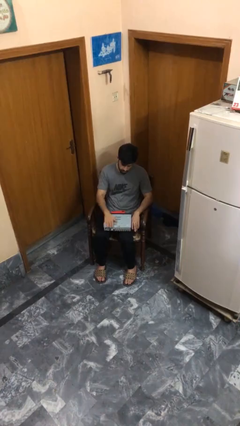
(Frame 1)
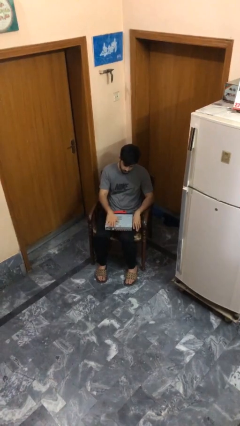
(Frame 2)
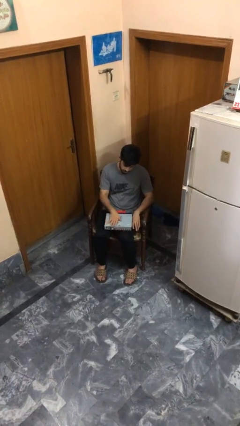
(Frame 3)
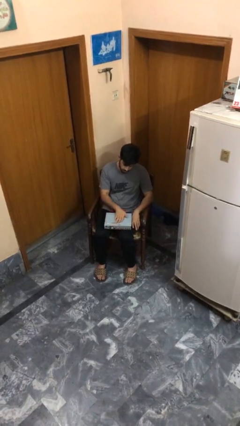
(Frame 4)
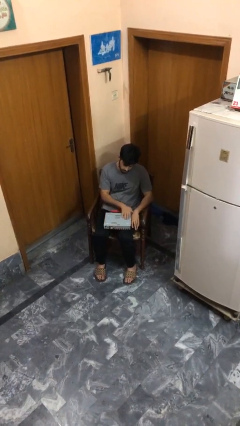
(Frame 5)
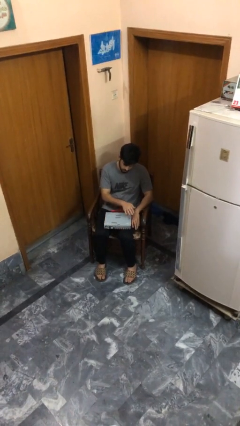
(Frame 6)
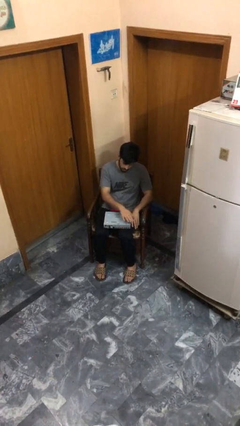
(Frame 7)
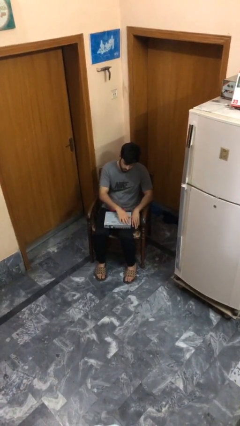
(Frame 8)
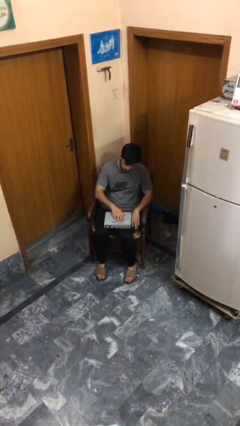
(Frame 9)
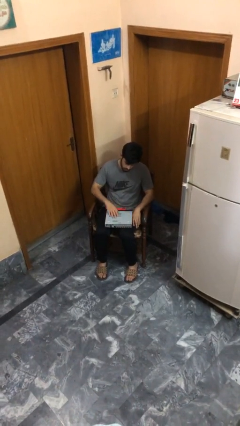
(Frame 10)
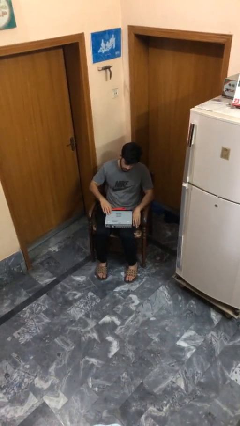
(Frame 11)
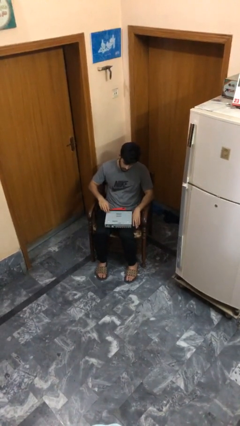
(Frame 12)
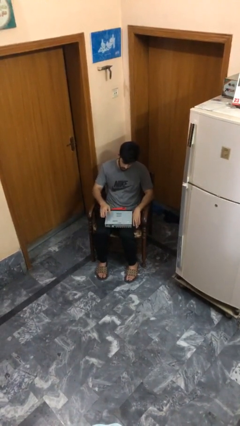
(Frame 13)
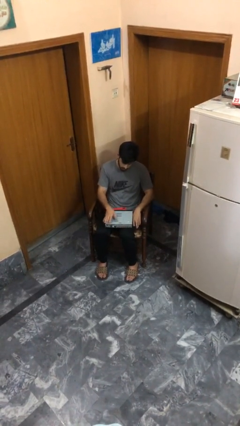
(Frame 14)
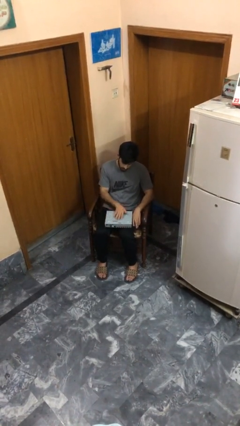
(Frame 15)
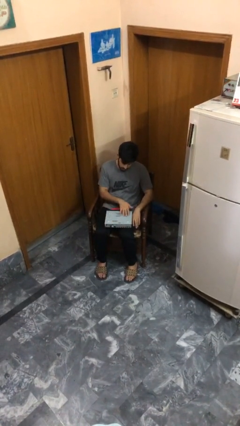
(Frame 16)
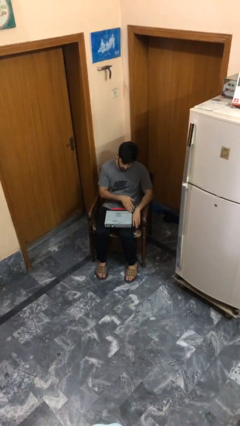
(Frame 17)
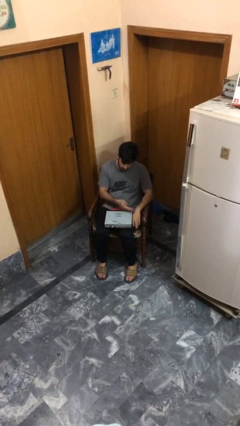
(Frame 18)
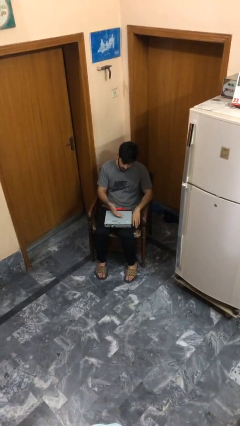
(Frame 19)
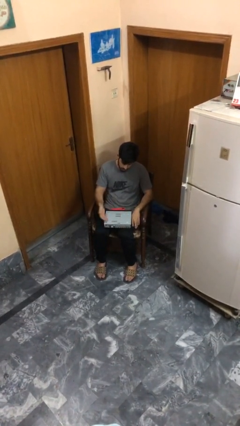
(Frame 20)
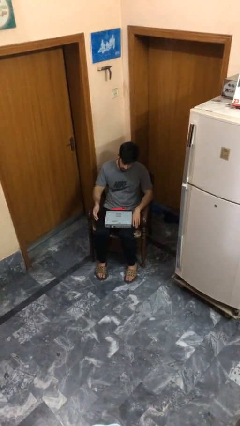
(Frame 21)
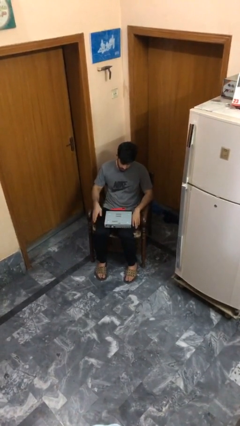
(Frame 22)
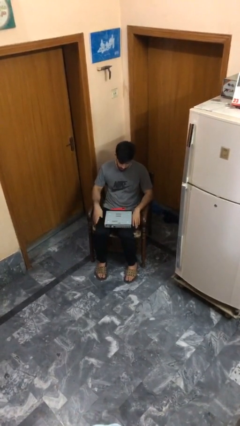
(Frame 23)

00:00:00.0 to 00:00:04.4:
person waves hand over object

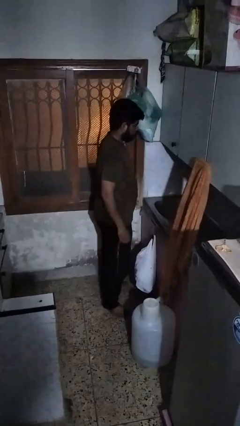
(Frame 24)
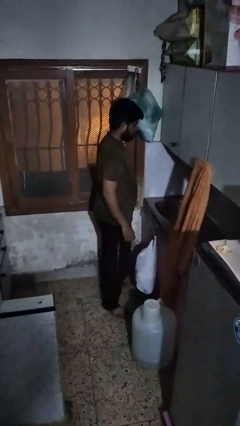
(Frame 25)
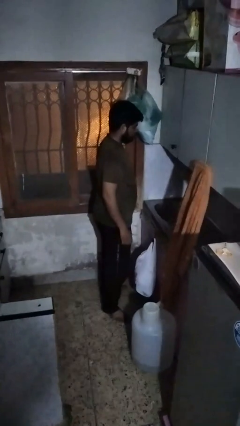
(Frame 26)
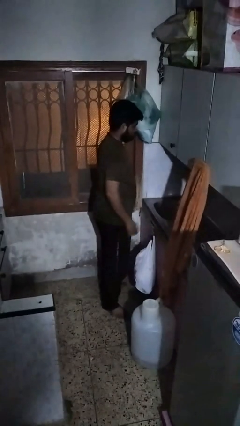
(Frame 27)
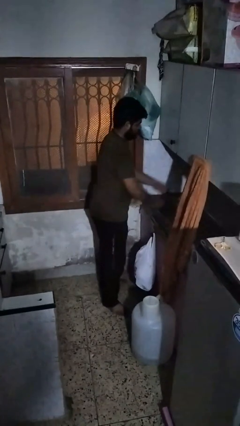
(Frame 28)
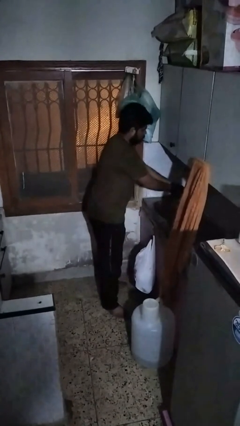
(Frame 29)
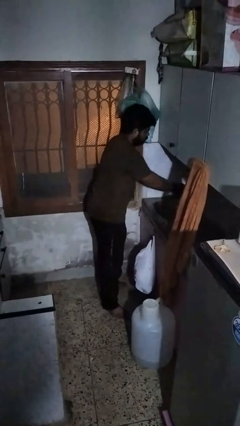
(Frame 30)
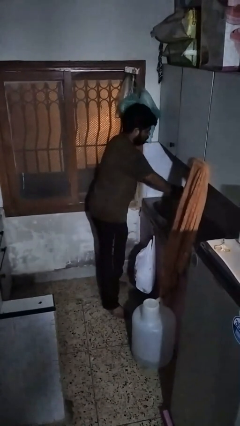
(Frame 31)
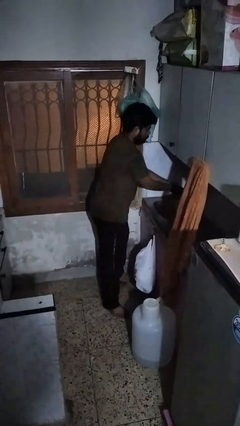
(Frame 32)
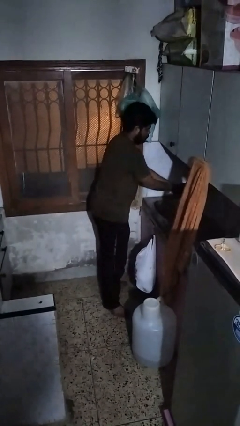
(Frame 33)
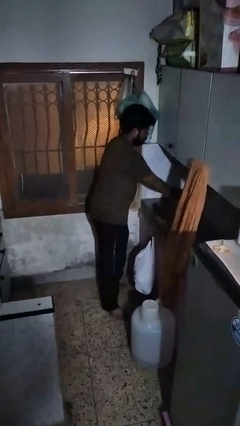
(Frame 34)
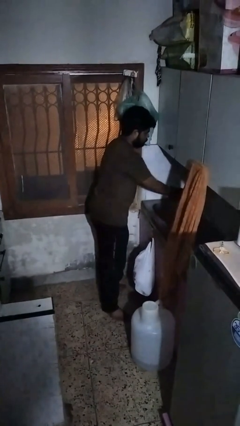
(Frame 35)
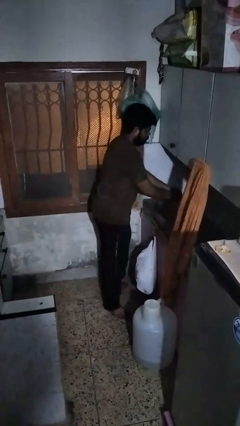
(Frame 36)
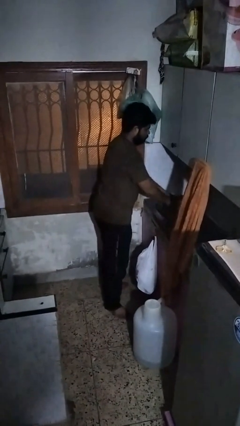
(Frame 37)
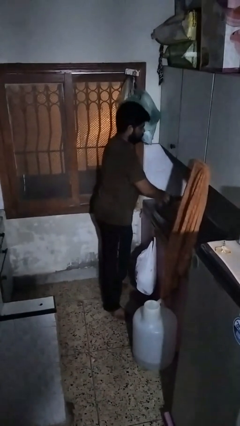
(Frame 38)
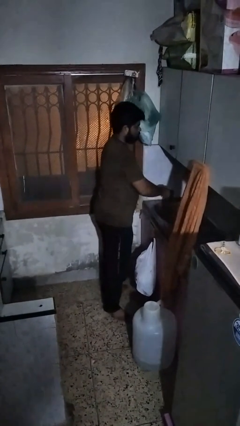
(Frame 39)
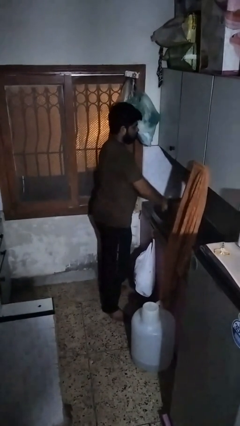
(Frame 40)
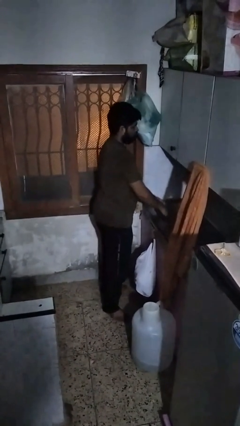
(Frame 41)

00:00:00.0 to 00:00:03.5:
person washes hands

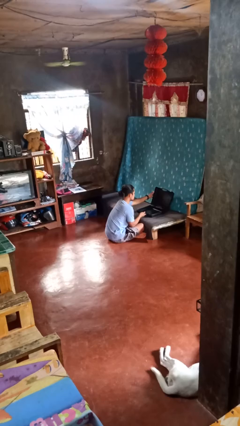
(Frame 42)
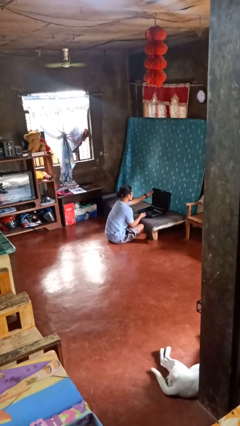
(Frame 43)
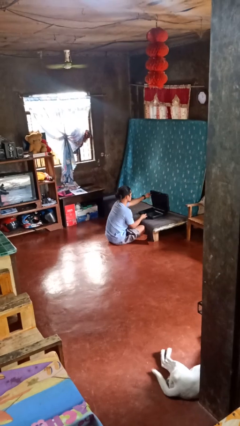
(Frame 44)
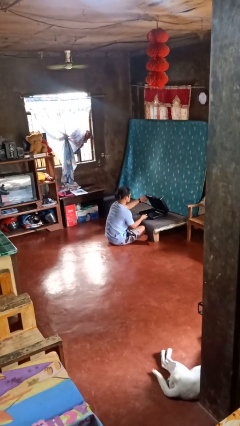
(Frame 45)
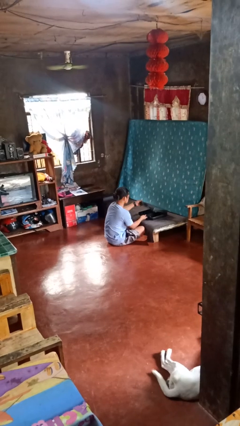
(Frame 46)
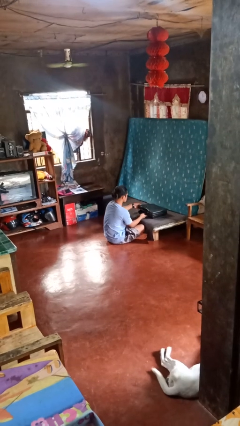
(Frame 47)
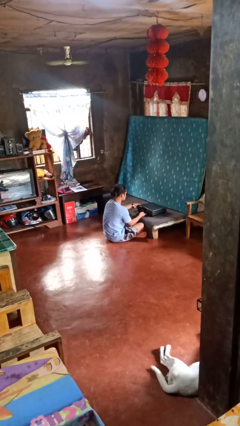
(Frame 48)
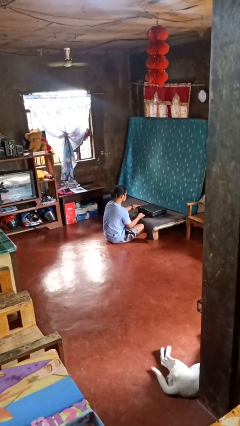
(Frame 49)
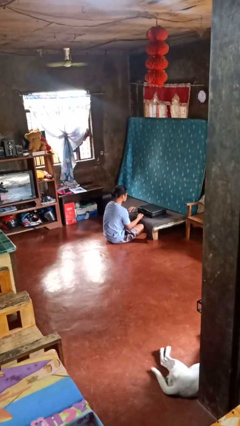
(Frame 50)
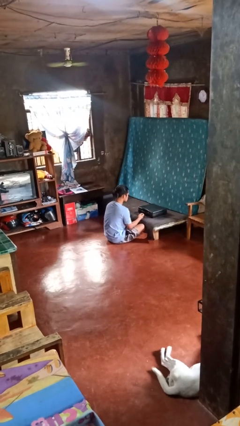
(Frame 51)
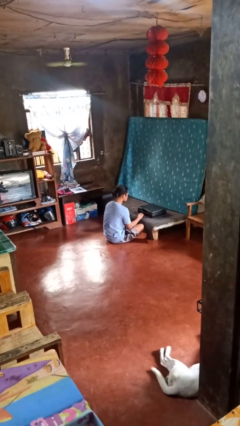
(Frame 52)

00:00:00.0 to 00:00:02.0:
person closes suitcase

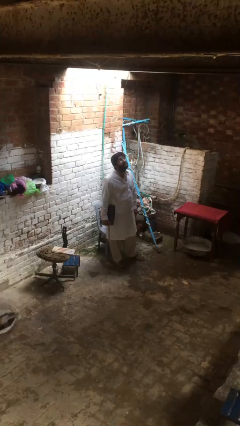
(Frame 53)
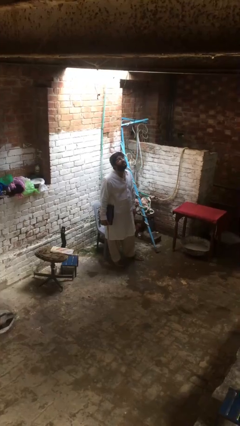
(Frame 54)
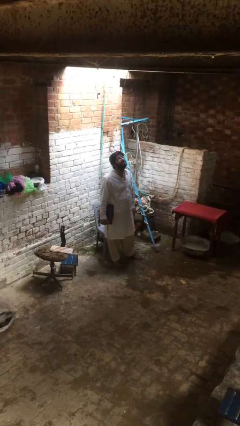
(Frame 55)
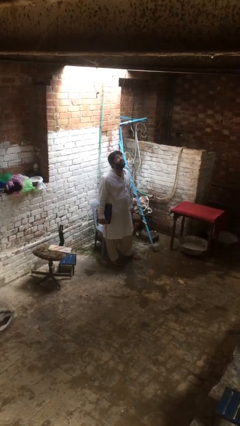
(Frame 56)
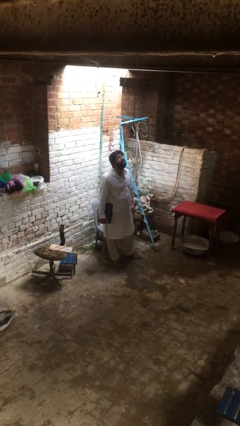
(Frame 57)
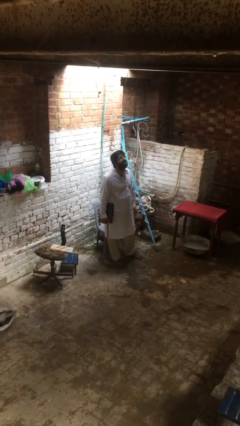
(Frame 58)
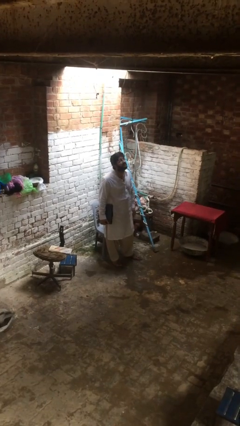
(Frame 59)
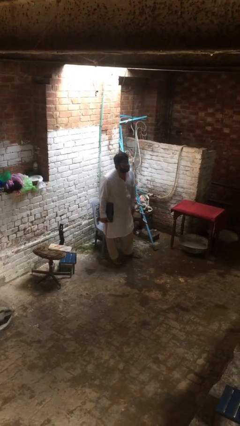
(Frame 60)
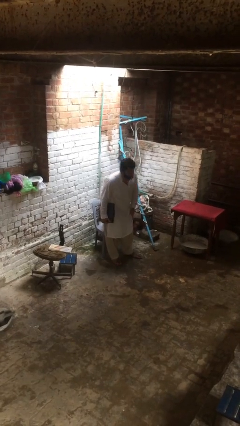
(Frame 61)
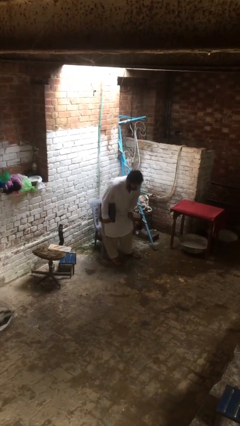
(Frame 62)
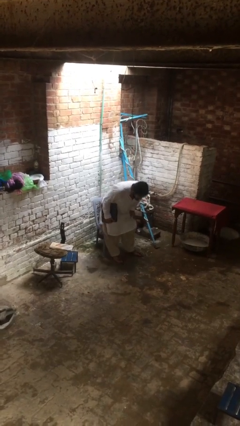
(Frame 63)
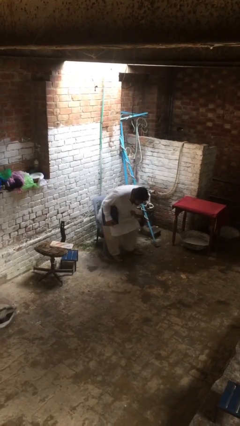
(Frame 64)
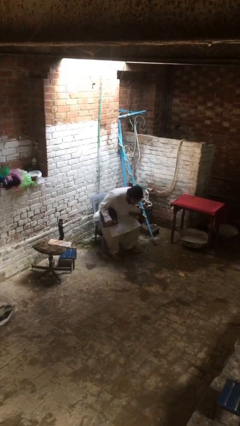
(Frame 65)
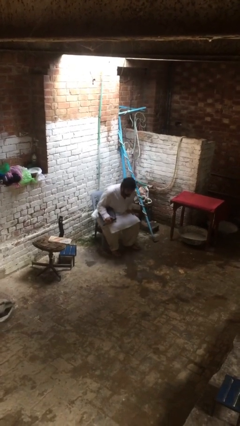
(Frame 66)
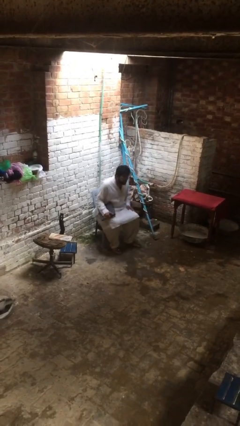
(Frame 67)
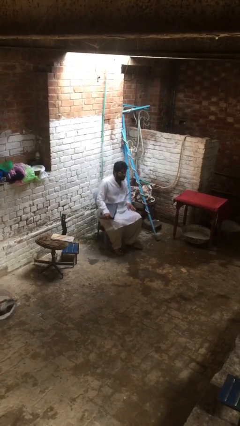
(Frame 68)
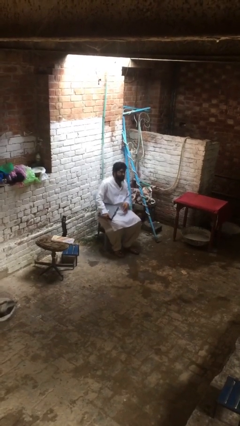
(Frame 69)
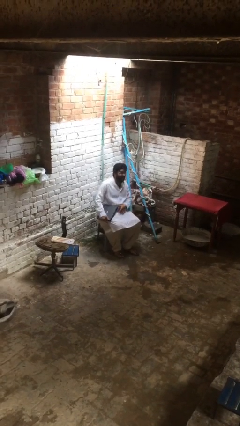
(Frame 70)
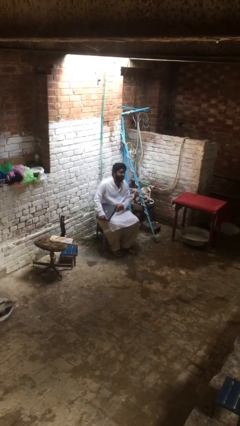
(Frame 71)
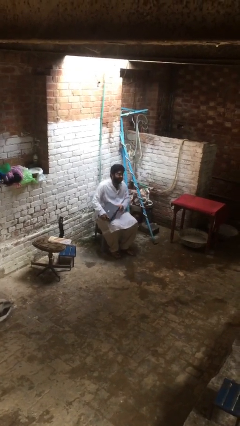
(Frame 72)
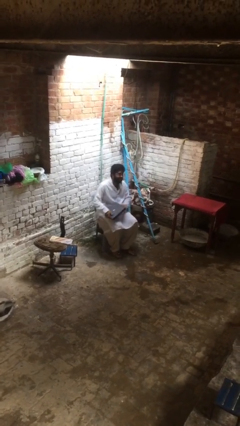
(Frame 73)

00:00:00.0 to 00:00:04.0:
person sits down

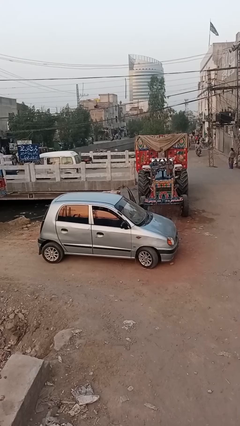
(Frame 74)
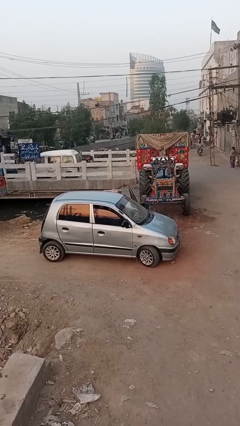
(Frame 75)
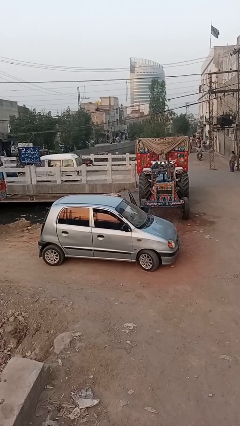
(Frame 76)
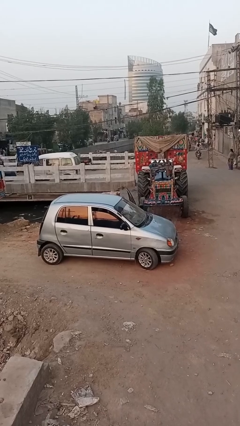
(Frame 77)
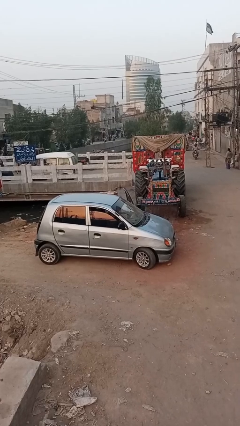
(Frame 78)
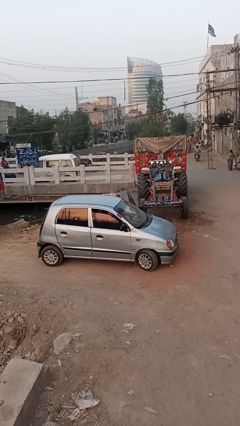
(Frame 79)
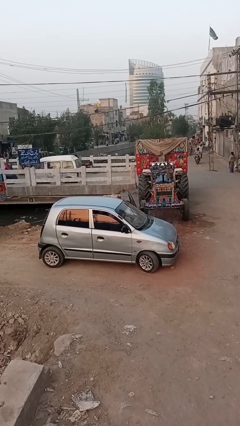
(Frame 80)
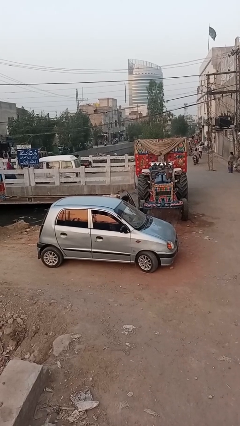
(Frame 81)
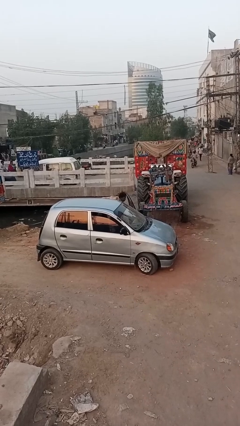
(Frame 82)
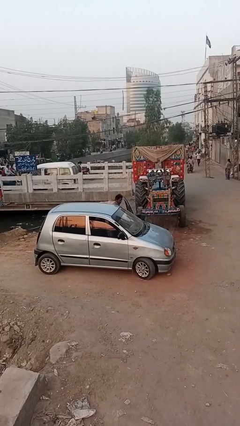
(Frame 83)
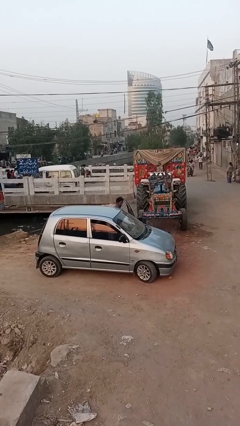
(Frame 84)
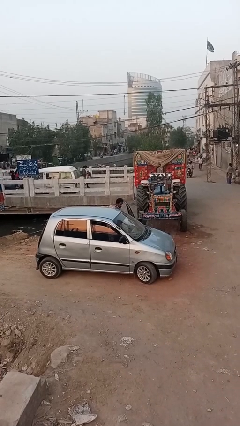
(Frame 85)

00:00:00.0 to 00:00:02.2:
person exits car

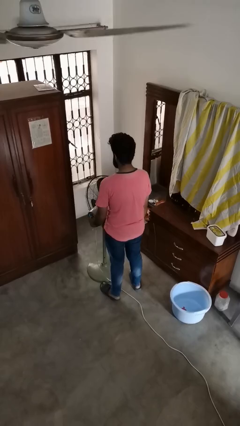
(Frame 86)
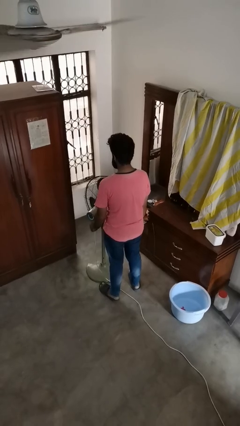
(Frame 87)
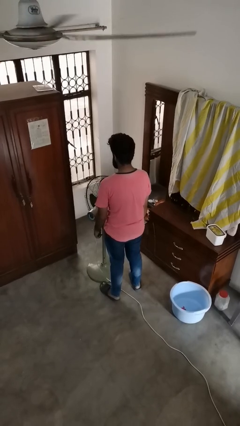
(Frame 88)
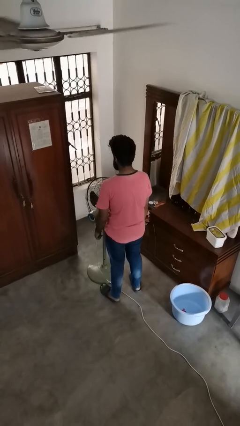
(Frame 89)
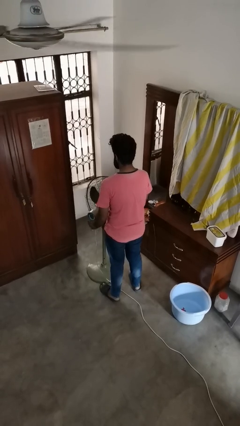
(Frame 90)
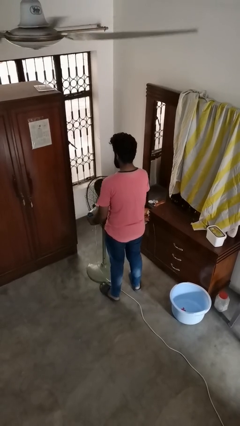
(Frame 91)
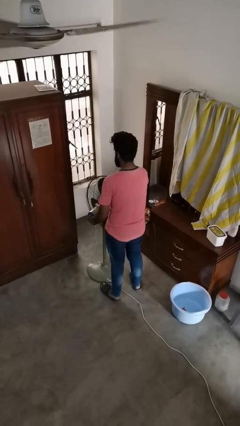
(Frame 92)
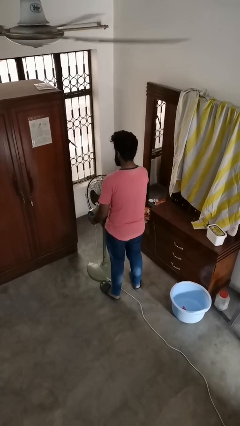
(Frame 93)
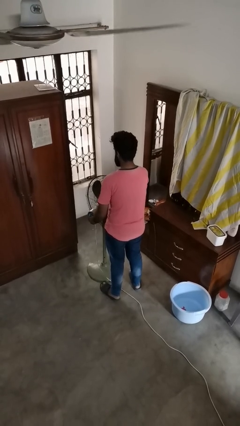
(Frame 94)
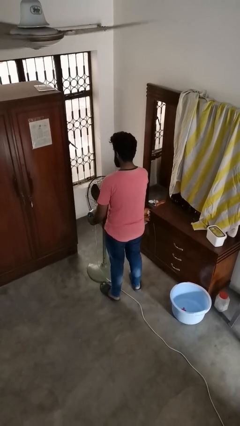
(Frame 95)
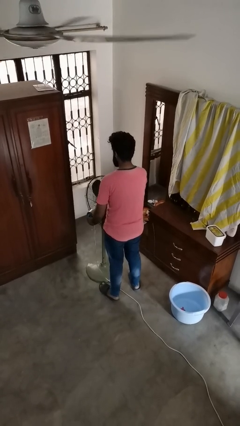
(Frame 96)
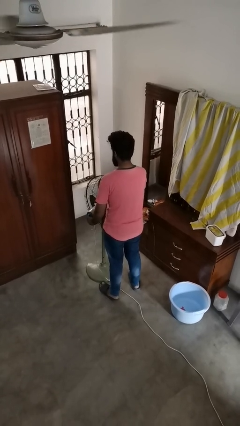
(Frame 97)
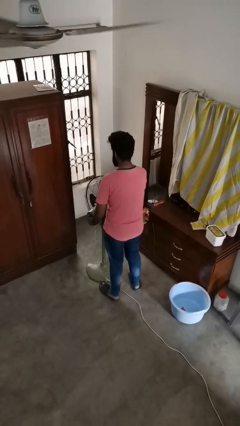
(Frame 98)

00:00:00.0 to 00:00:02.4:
person turns off fan
